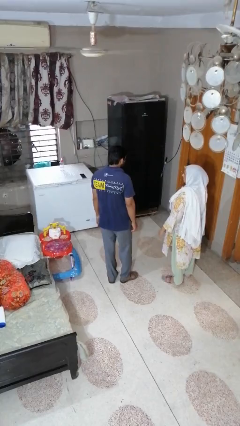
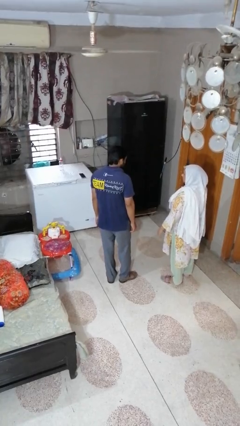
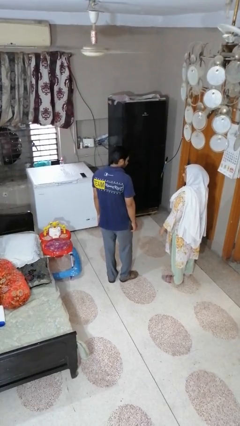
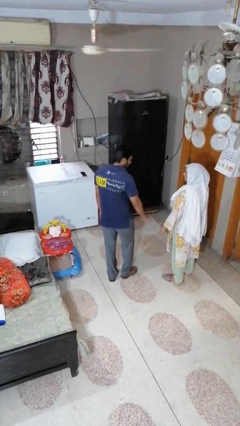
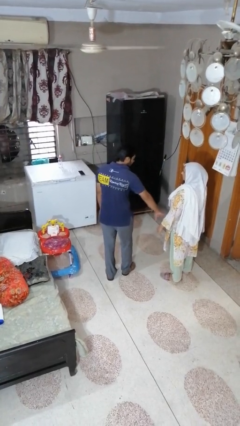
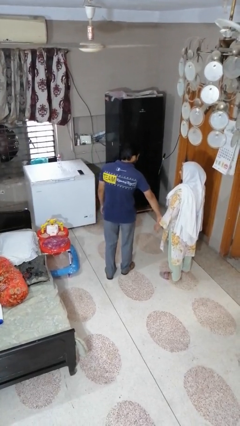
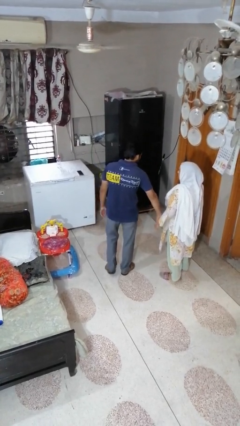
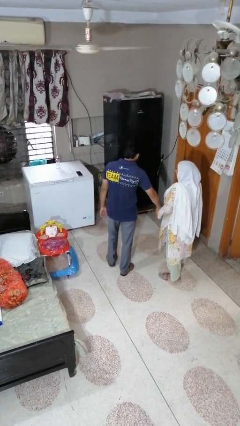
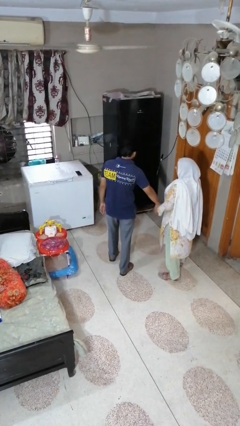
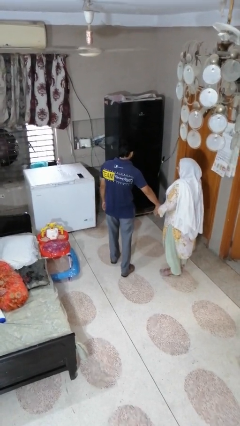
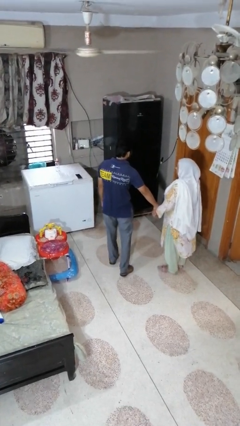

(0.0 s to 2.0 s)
person grabs person by forearm

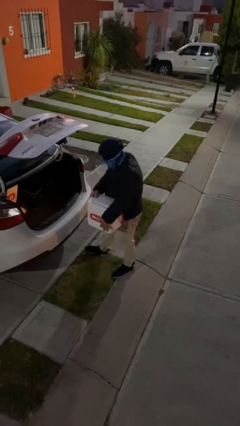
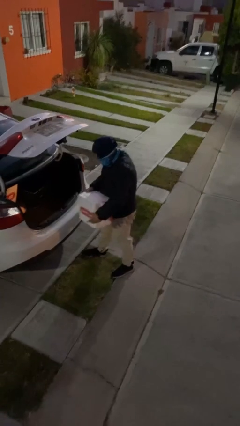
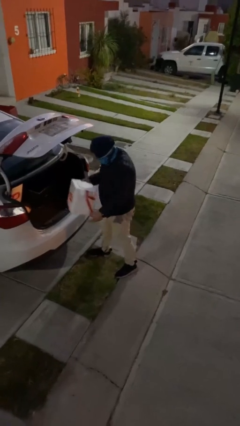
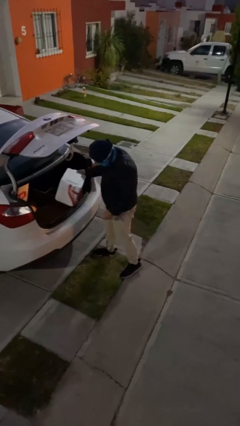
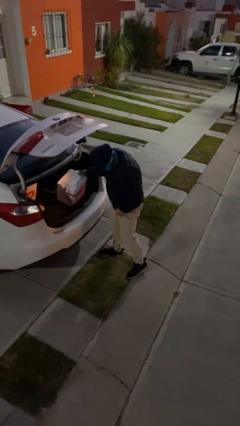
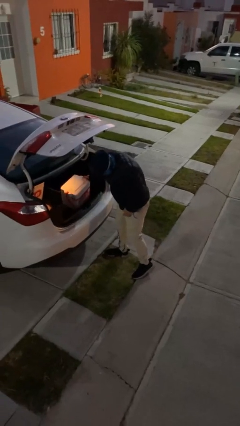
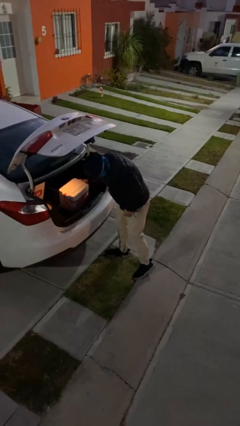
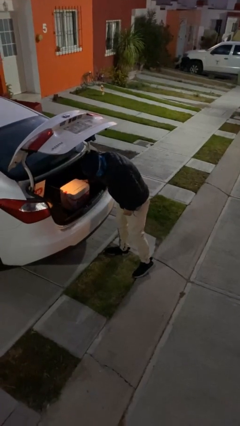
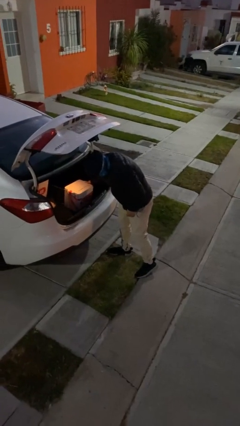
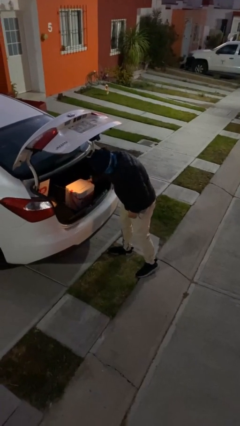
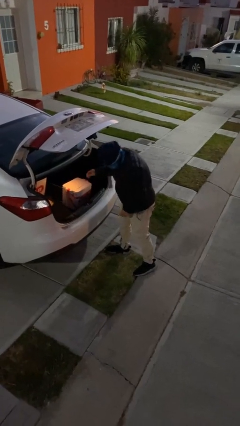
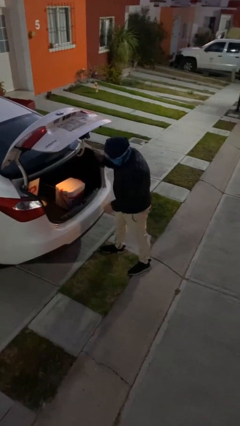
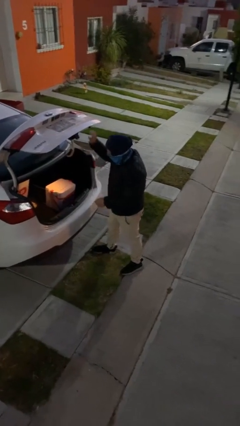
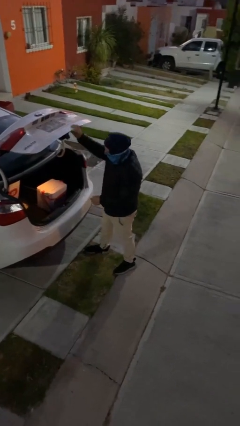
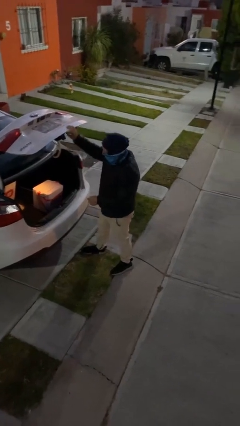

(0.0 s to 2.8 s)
person loads car

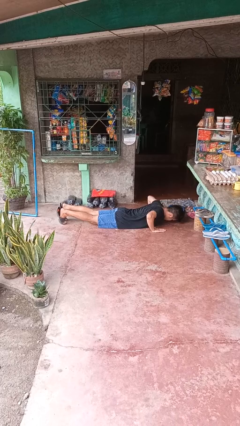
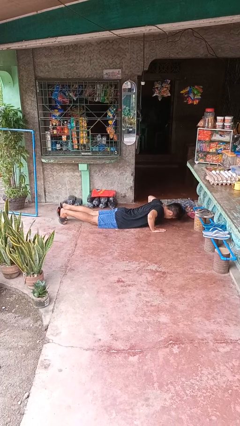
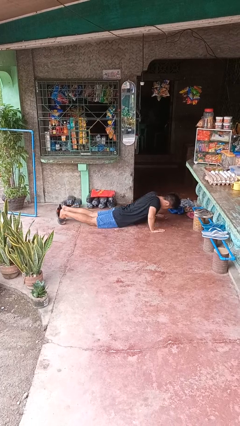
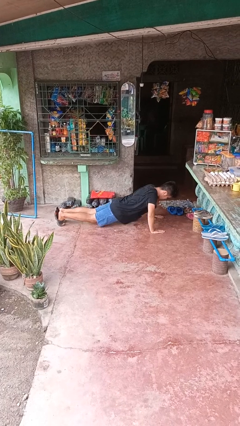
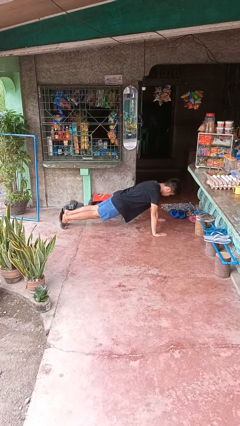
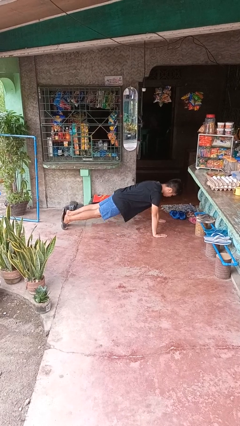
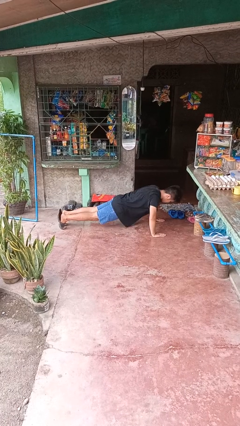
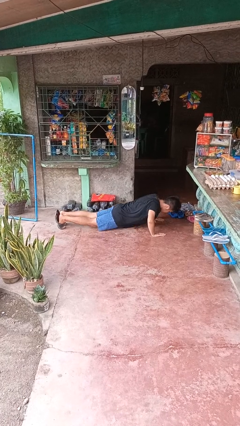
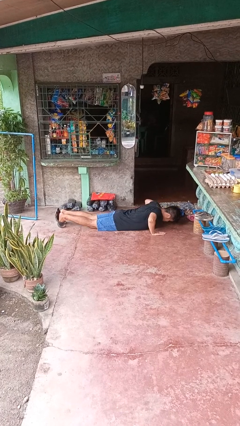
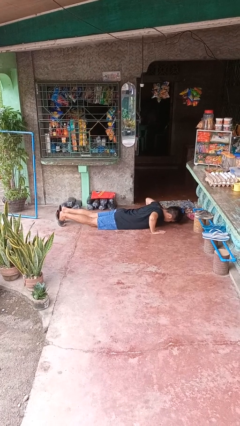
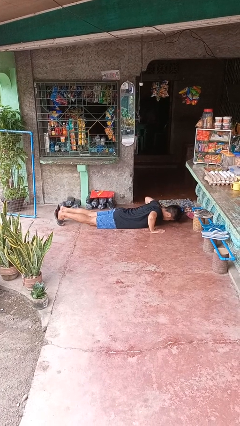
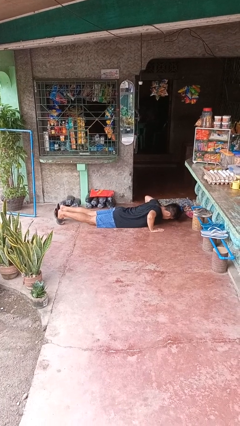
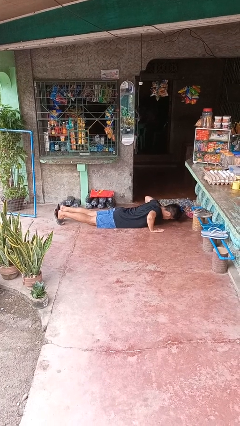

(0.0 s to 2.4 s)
person exercises with pushup

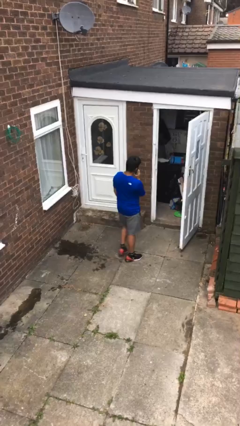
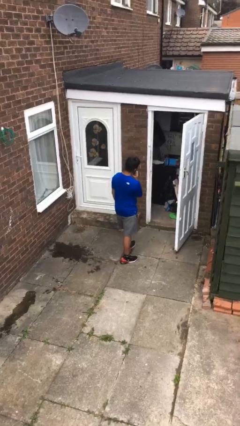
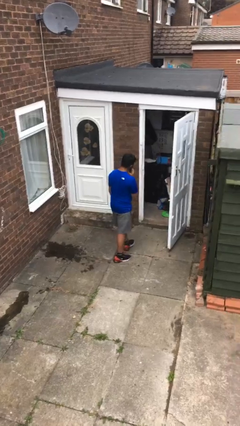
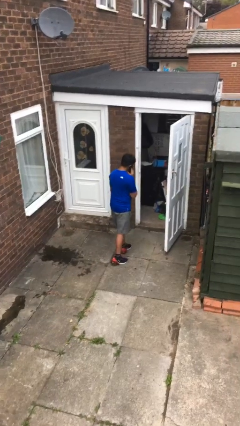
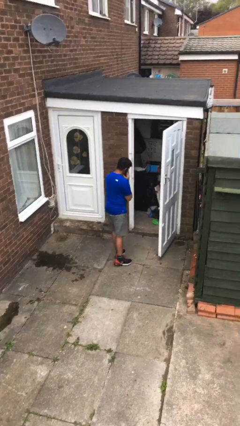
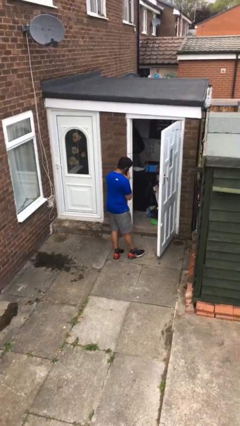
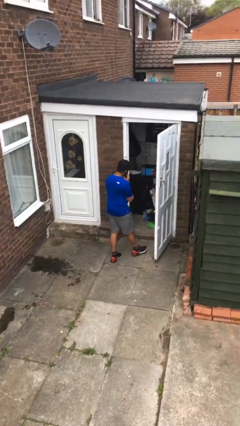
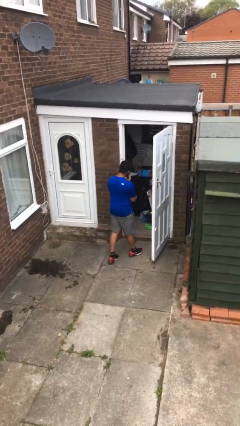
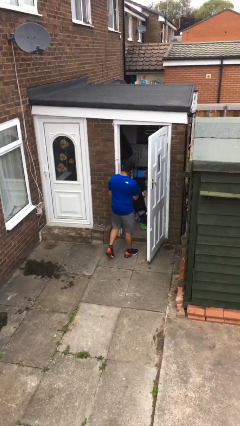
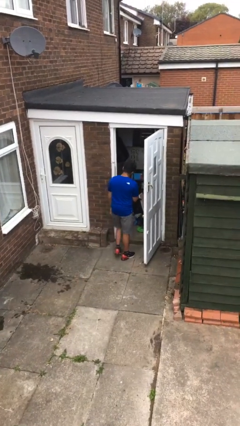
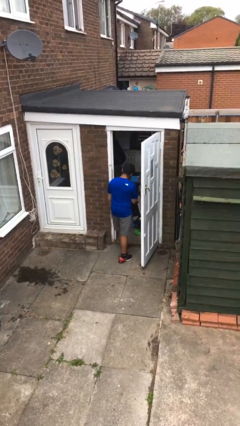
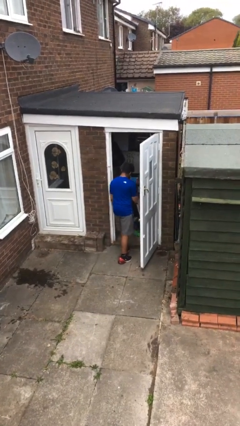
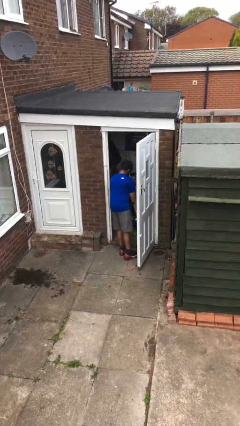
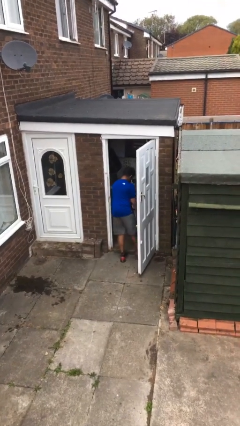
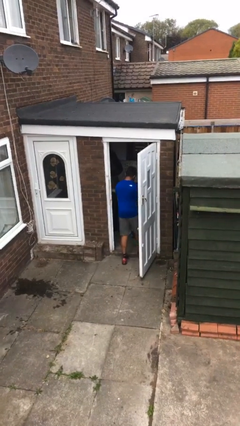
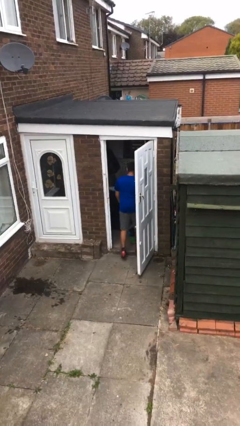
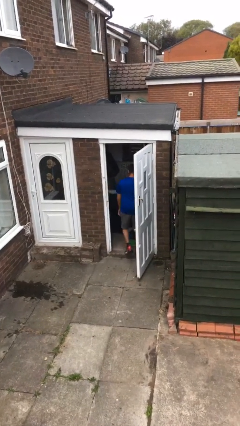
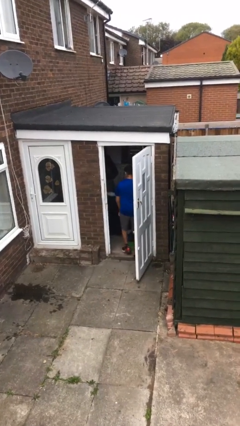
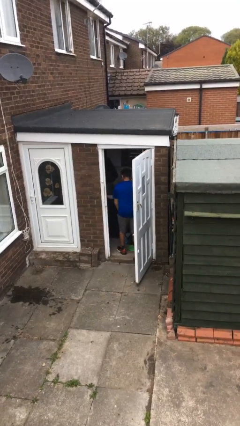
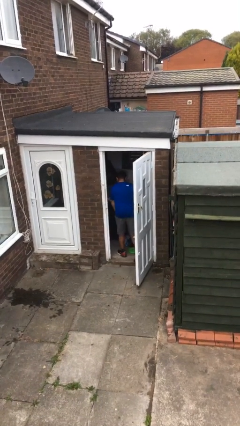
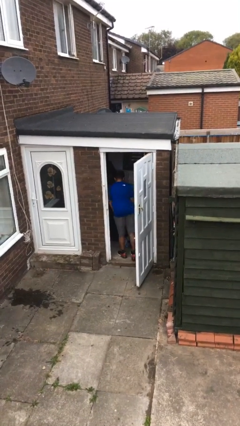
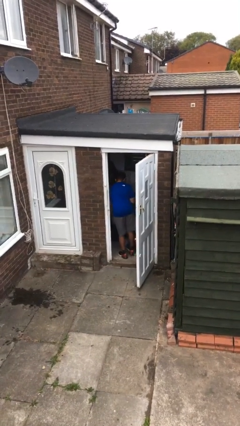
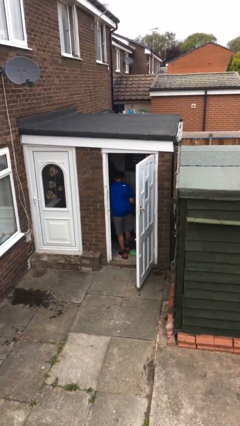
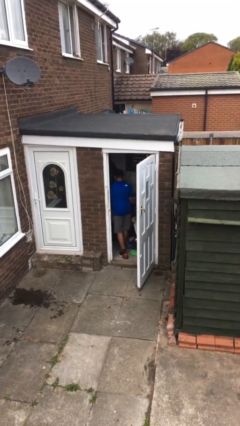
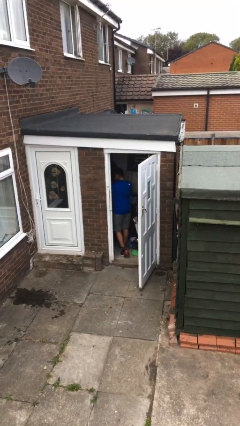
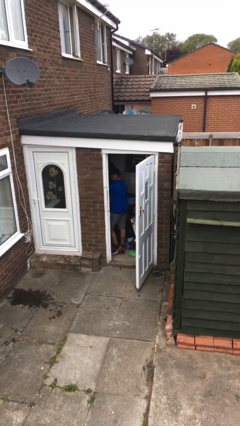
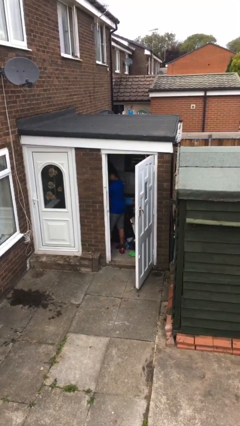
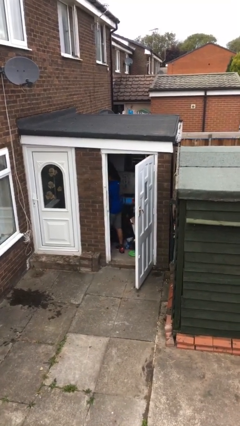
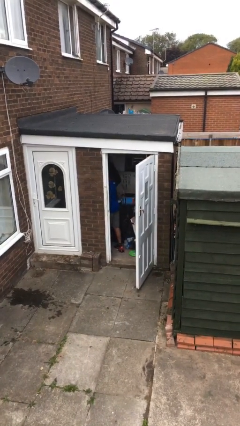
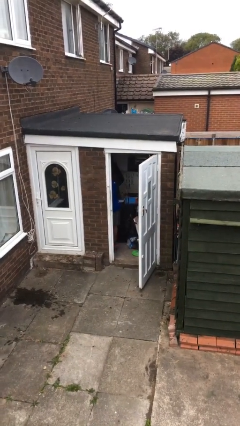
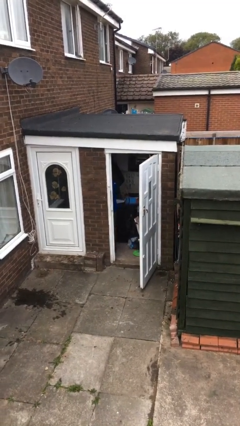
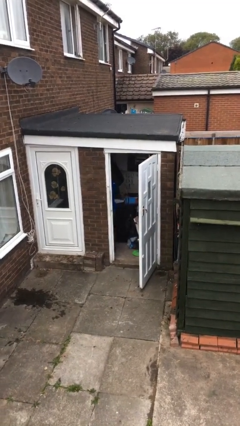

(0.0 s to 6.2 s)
person exits scene through structure

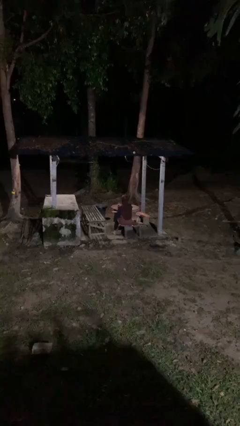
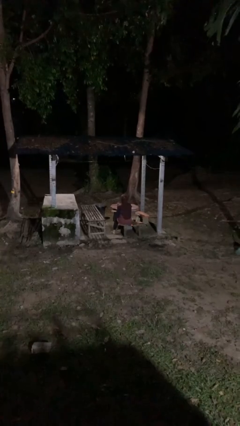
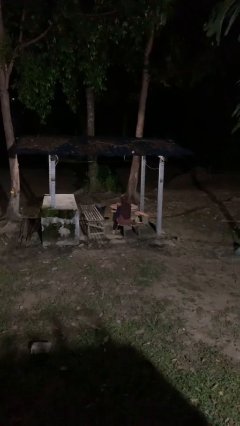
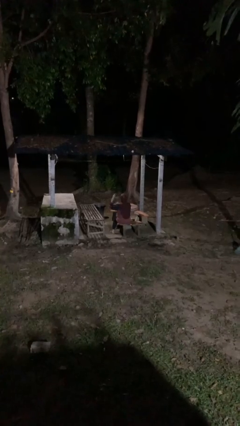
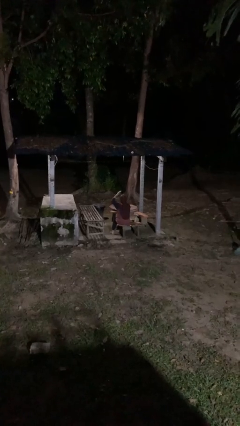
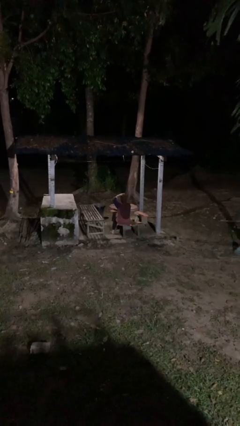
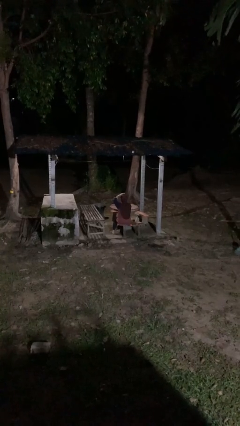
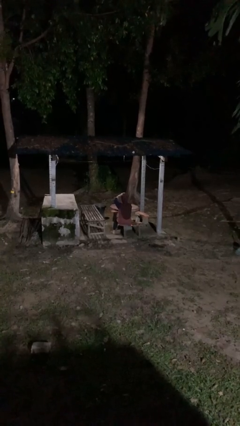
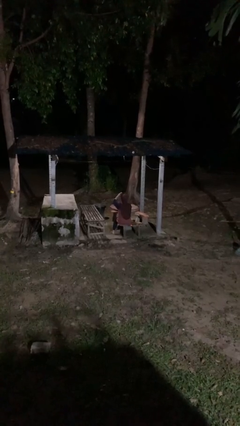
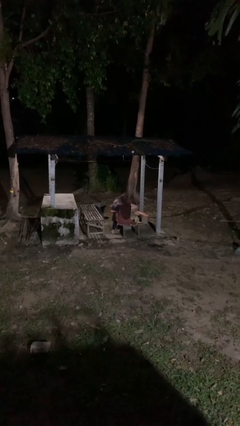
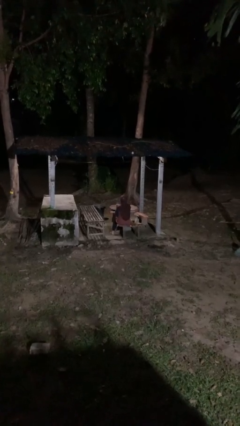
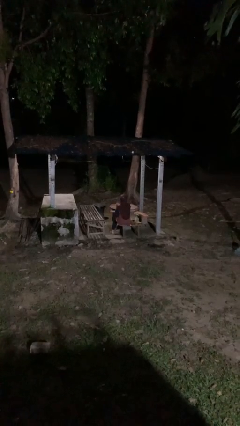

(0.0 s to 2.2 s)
person pats head

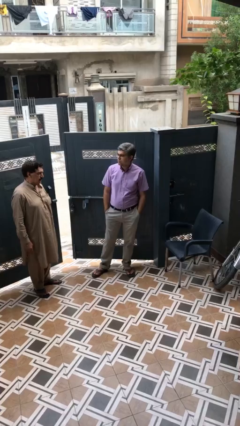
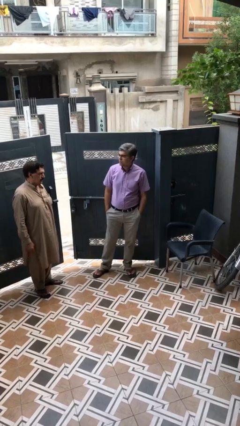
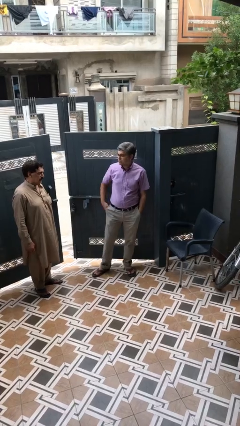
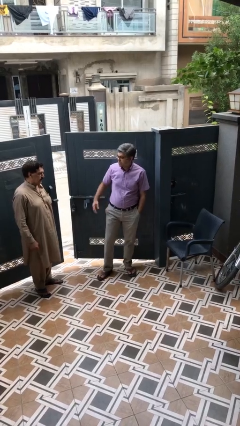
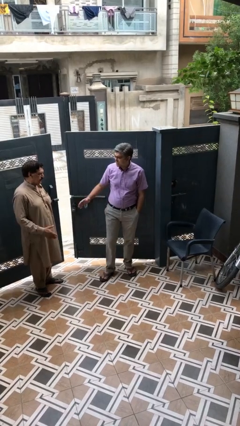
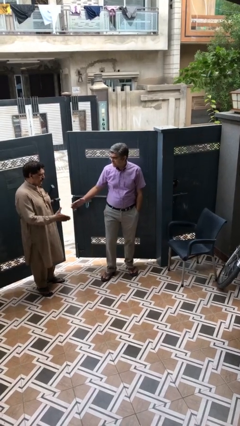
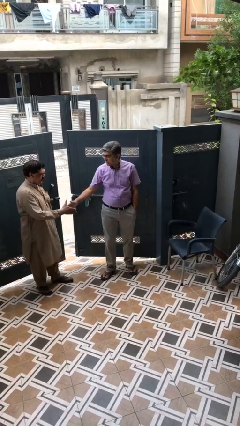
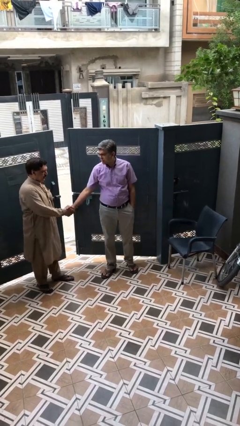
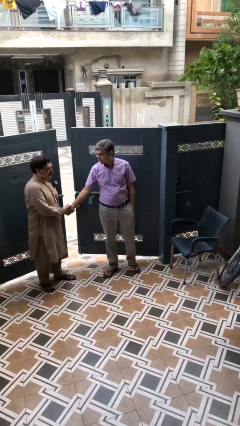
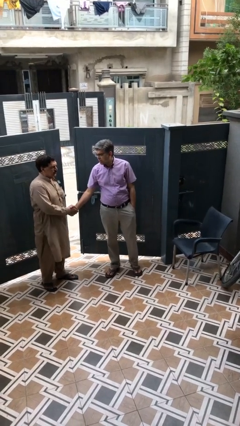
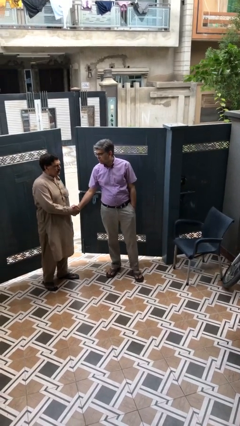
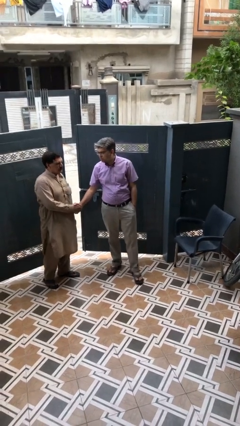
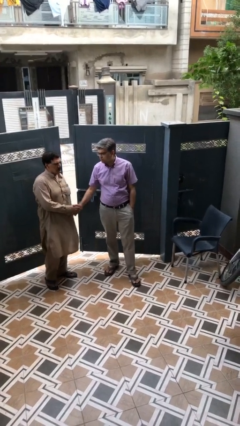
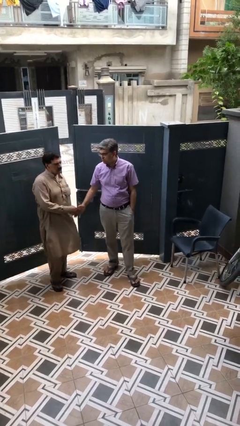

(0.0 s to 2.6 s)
person shakes hand
